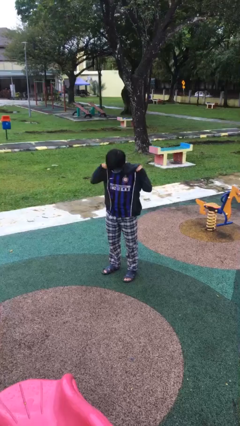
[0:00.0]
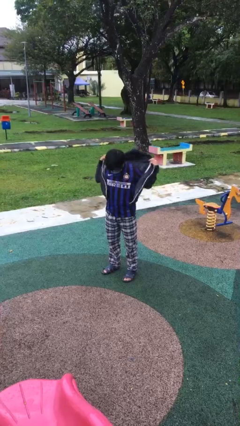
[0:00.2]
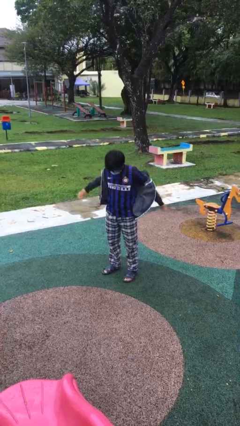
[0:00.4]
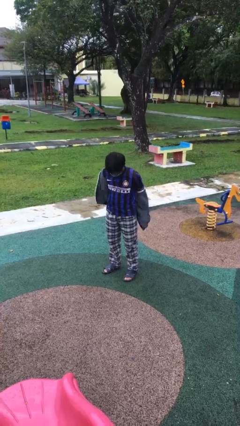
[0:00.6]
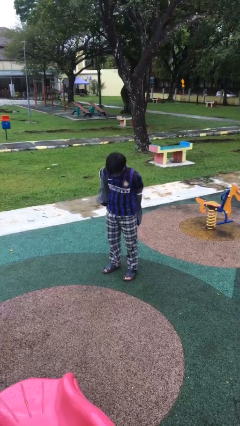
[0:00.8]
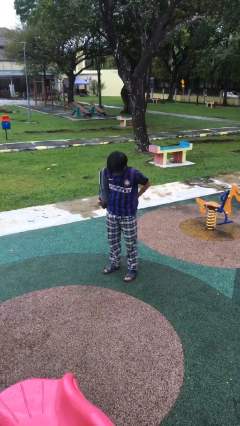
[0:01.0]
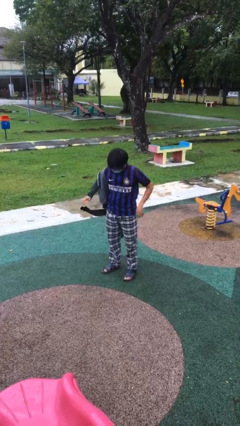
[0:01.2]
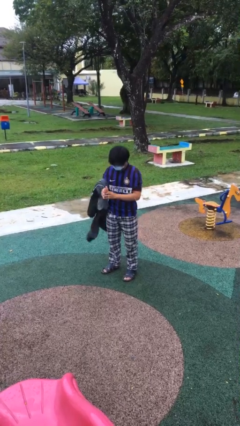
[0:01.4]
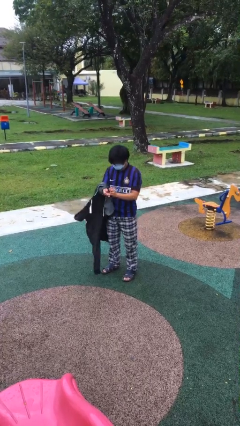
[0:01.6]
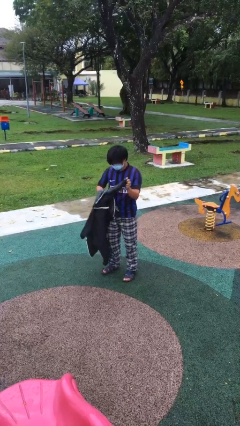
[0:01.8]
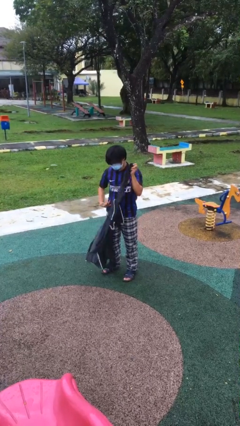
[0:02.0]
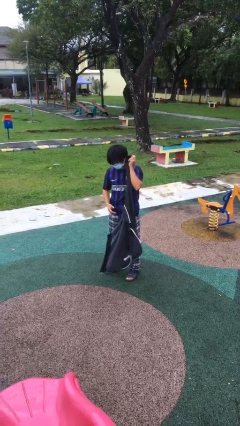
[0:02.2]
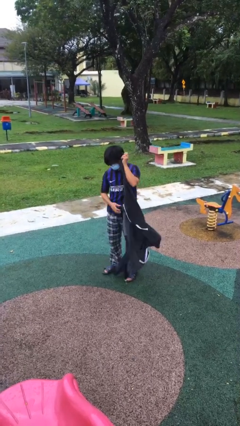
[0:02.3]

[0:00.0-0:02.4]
person takes off jacket

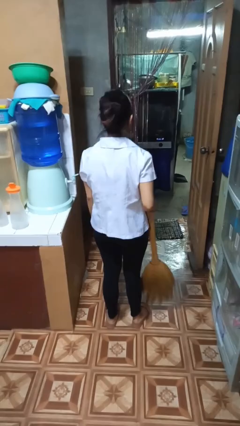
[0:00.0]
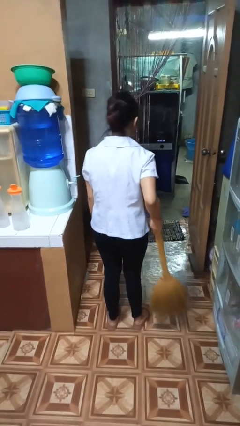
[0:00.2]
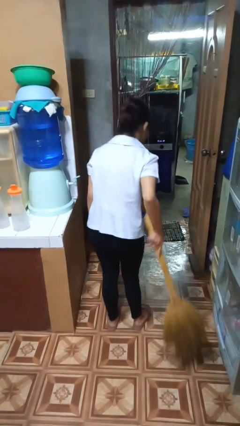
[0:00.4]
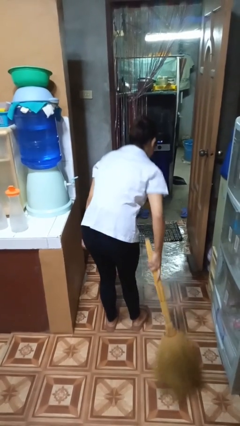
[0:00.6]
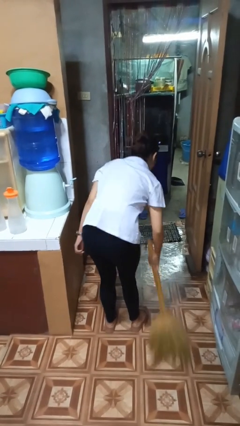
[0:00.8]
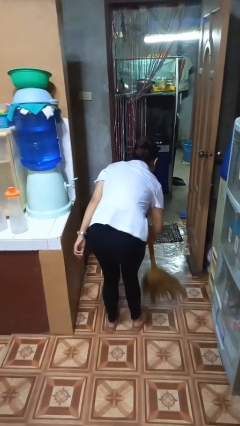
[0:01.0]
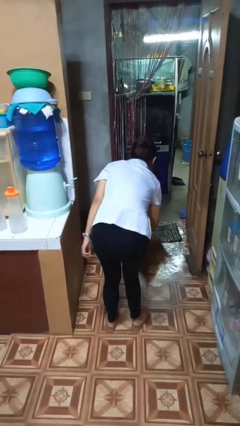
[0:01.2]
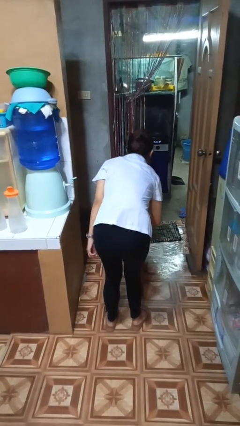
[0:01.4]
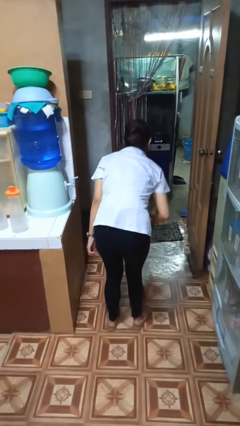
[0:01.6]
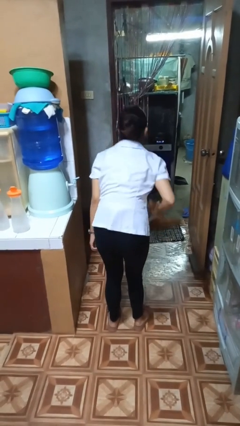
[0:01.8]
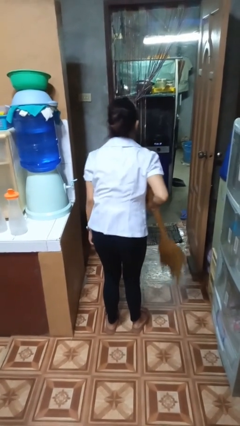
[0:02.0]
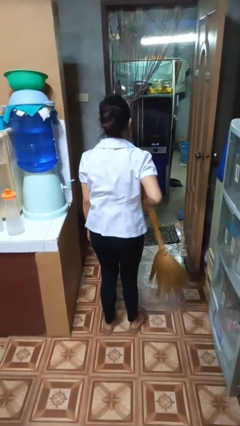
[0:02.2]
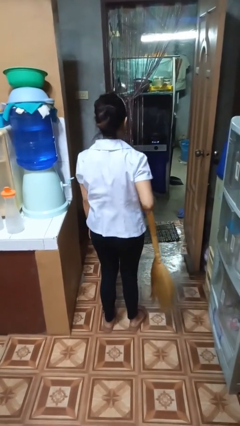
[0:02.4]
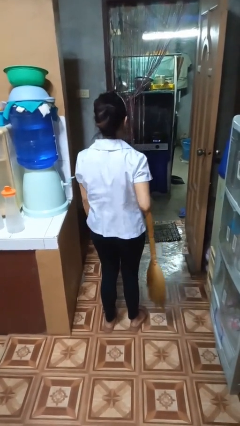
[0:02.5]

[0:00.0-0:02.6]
person sweeps floor

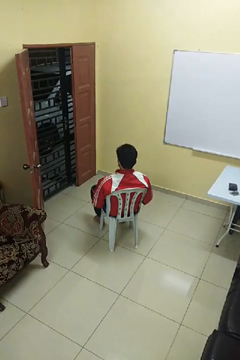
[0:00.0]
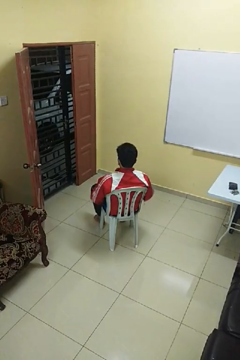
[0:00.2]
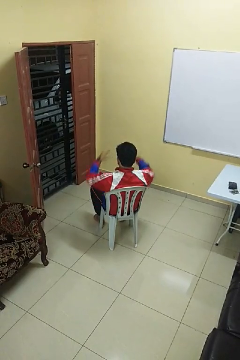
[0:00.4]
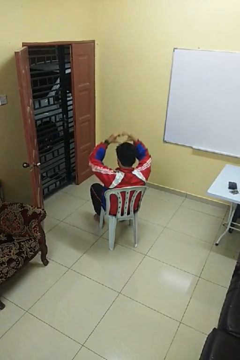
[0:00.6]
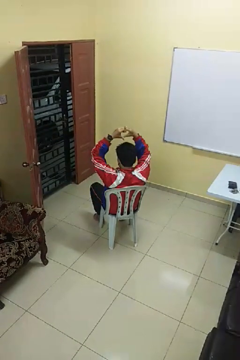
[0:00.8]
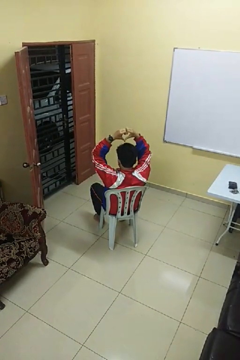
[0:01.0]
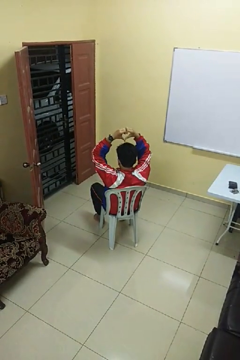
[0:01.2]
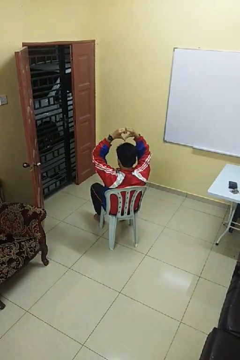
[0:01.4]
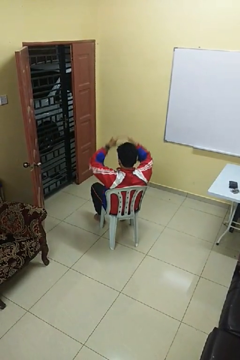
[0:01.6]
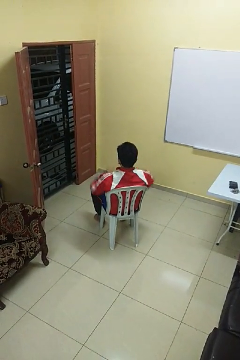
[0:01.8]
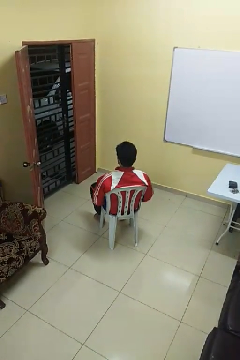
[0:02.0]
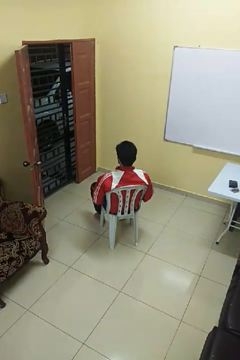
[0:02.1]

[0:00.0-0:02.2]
person gestures heart

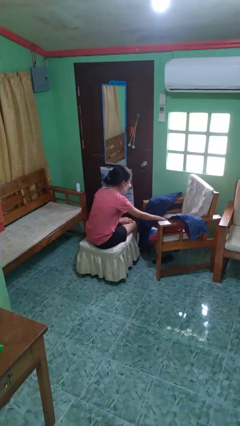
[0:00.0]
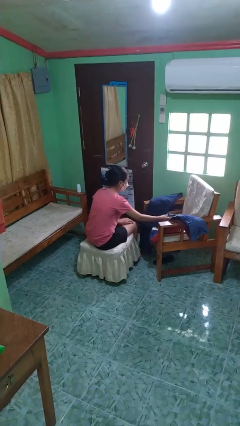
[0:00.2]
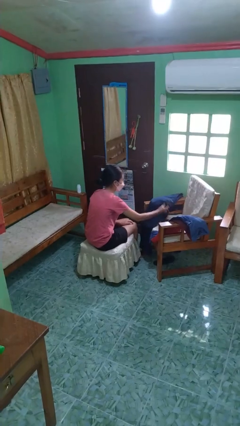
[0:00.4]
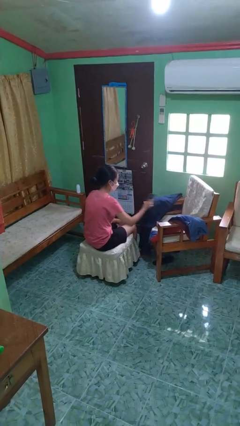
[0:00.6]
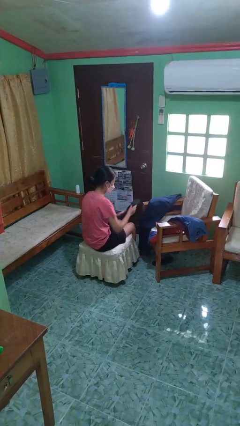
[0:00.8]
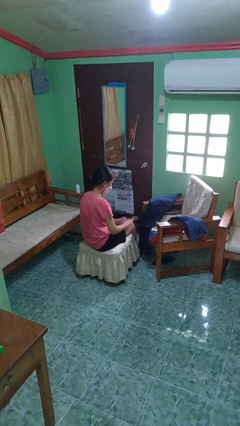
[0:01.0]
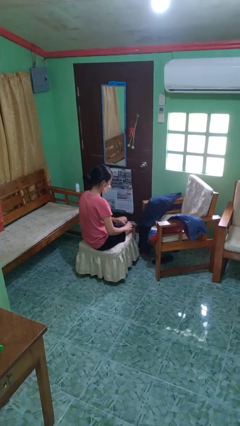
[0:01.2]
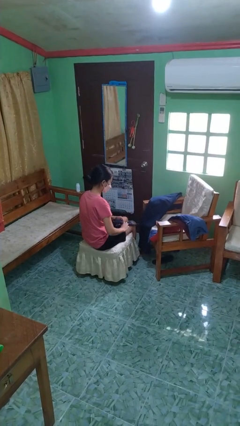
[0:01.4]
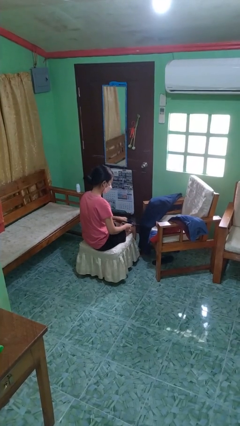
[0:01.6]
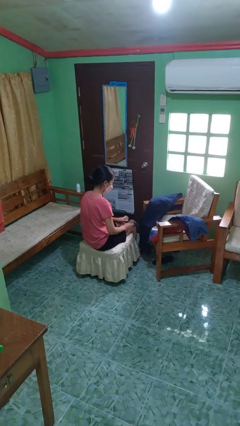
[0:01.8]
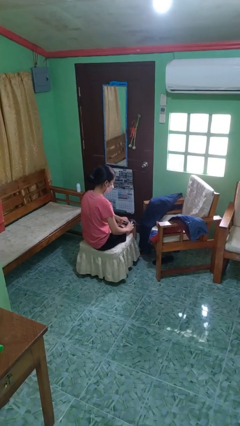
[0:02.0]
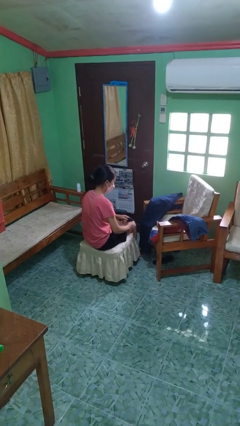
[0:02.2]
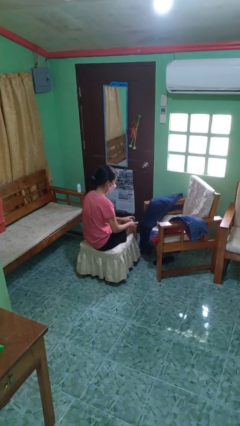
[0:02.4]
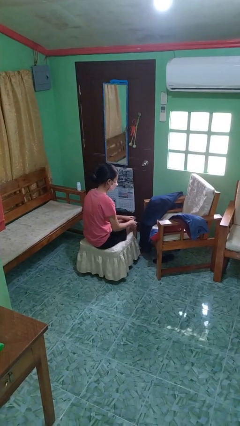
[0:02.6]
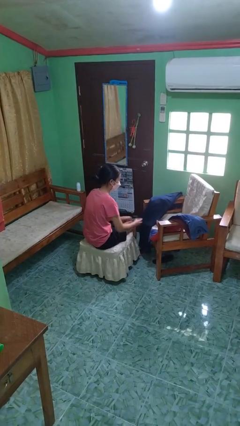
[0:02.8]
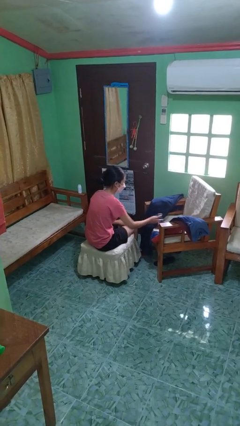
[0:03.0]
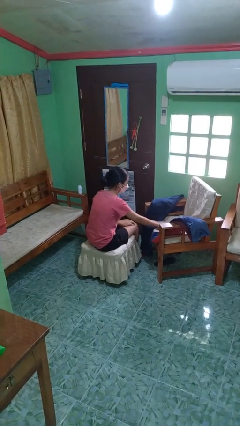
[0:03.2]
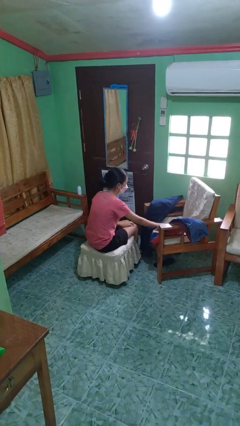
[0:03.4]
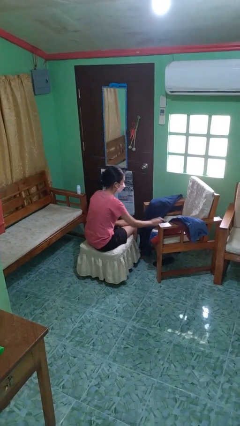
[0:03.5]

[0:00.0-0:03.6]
person folds socks

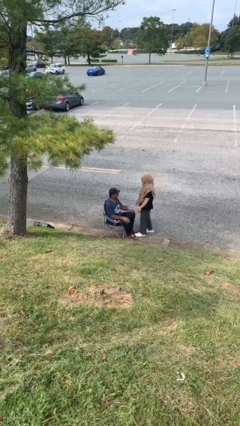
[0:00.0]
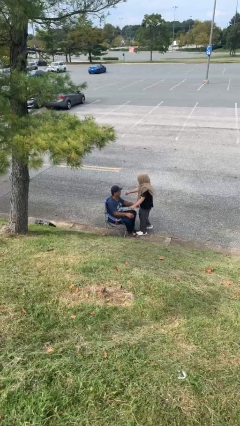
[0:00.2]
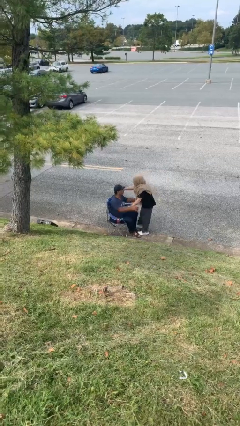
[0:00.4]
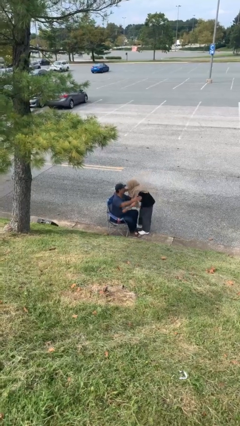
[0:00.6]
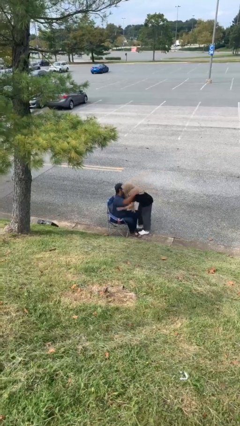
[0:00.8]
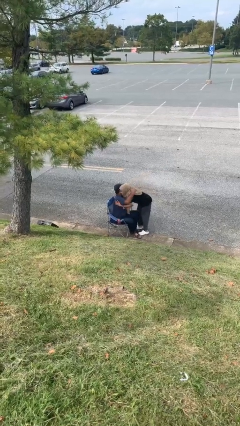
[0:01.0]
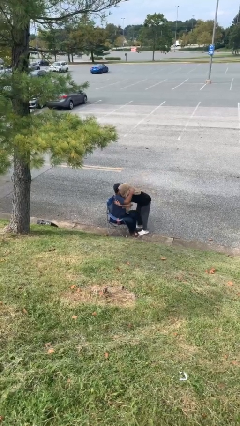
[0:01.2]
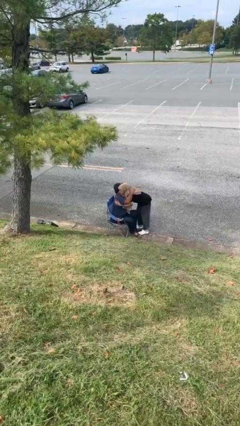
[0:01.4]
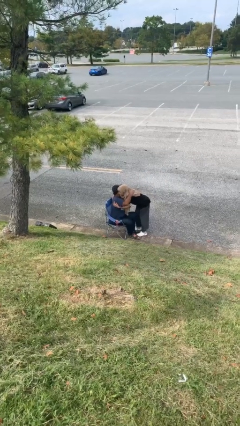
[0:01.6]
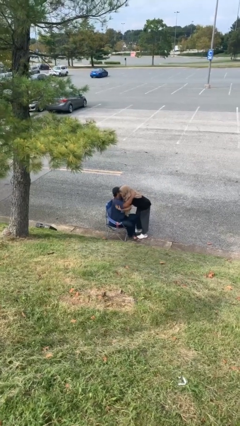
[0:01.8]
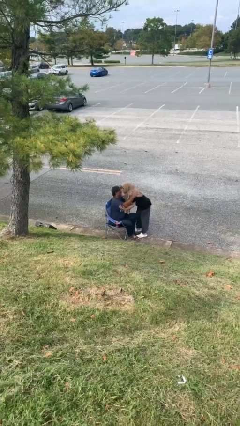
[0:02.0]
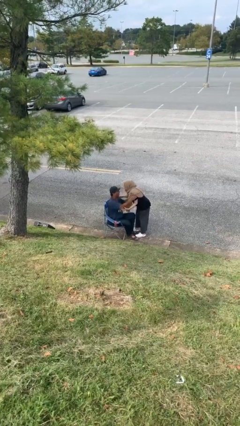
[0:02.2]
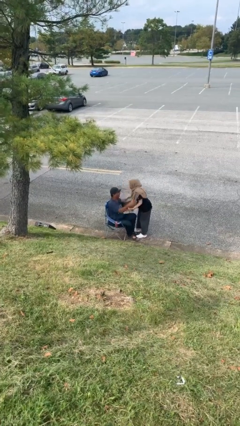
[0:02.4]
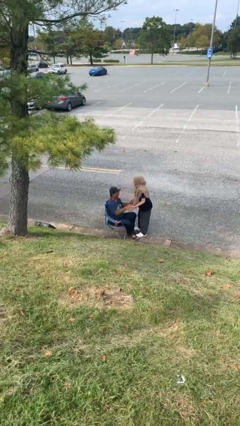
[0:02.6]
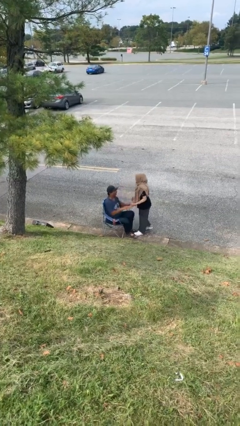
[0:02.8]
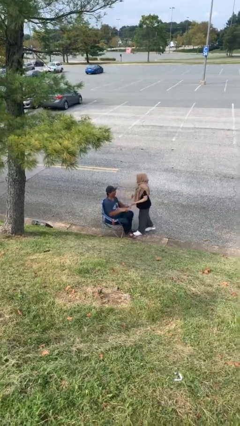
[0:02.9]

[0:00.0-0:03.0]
person embraces person

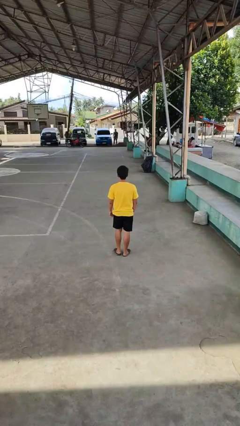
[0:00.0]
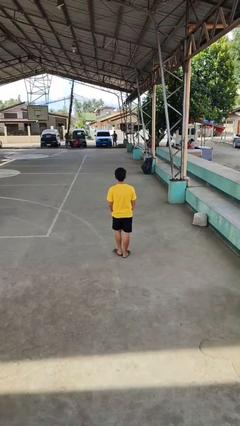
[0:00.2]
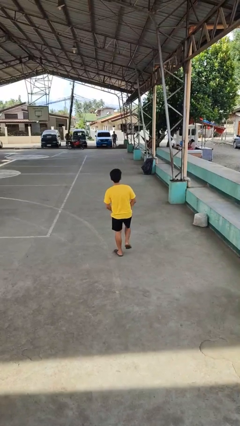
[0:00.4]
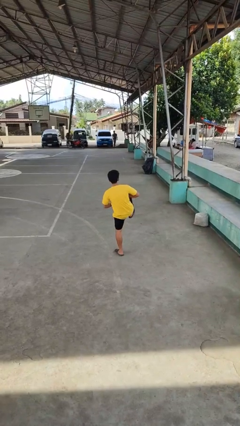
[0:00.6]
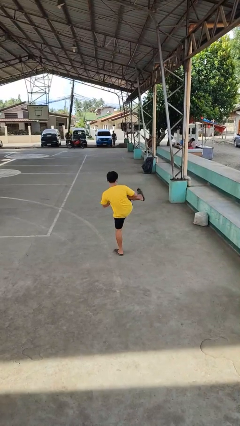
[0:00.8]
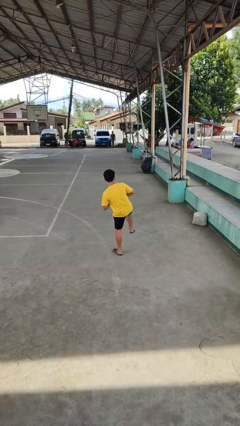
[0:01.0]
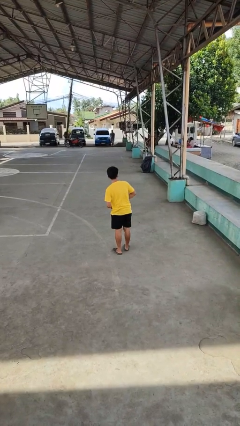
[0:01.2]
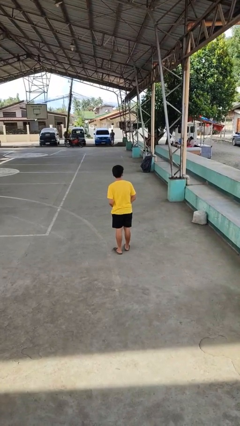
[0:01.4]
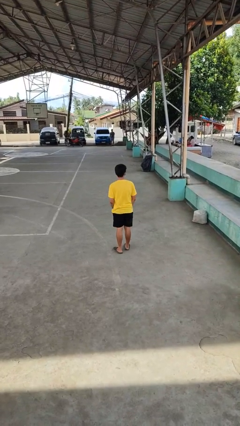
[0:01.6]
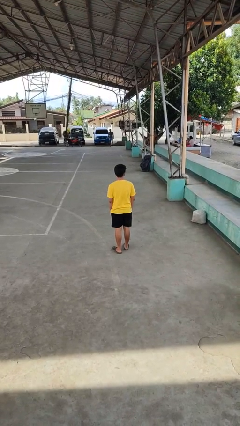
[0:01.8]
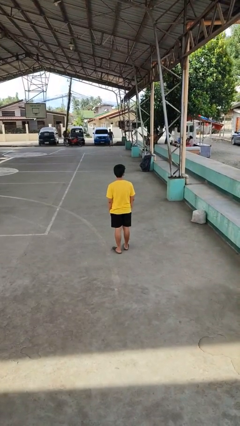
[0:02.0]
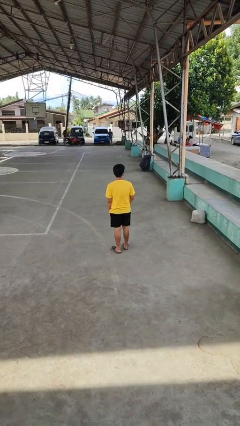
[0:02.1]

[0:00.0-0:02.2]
person karate kicks

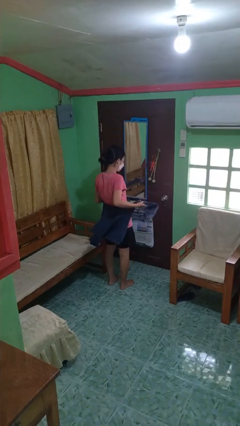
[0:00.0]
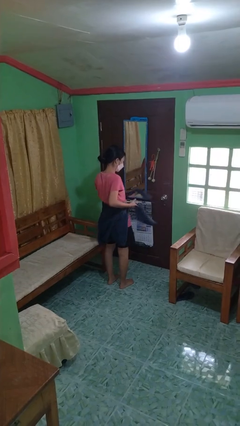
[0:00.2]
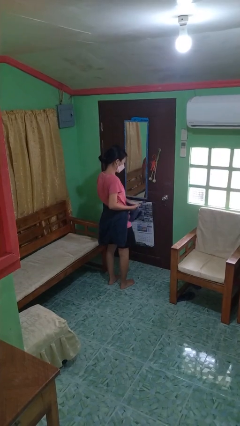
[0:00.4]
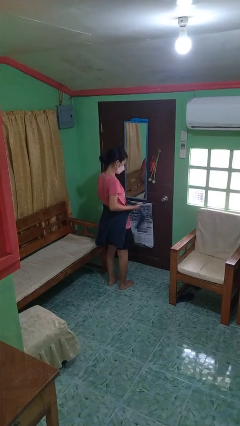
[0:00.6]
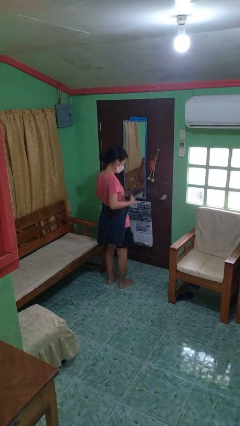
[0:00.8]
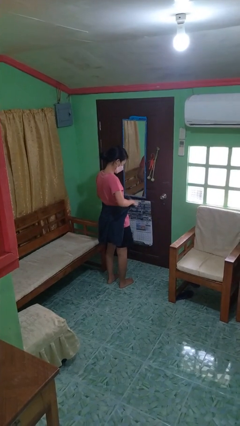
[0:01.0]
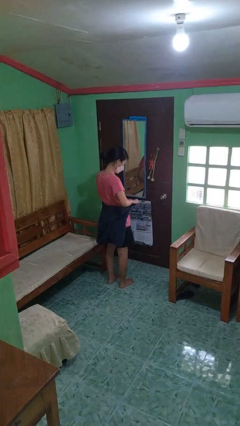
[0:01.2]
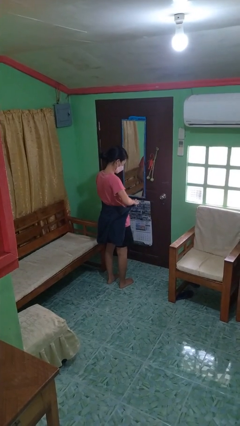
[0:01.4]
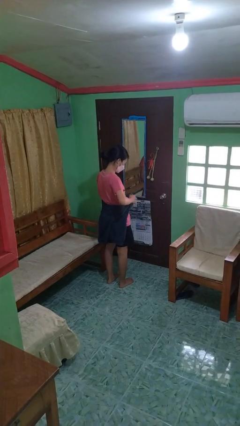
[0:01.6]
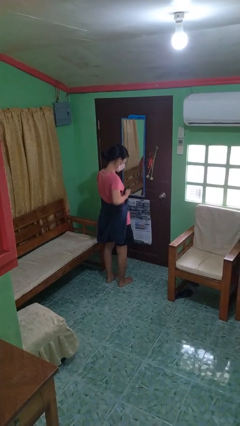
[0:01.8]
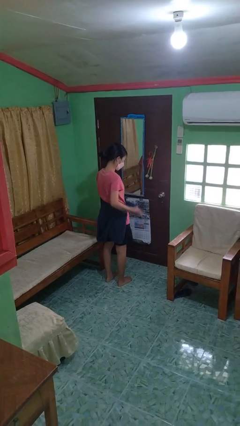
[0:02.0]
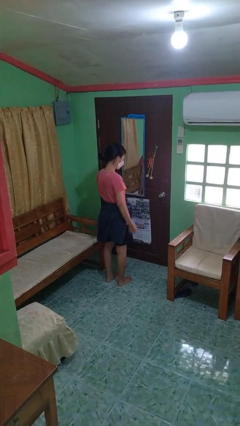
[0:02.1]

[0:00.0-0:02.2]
person ties jacket around waist
